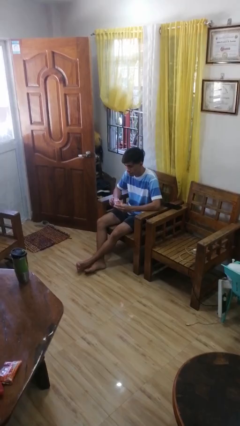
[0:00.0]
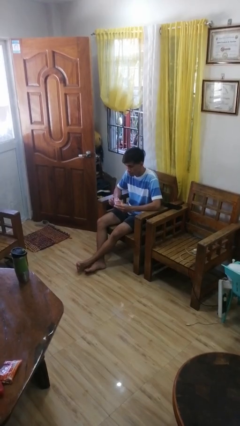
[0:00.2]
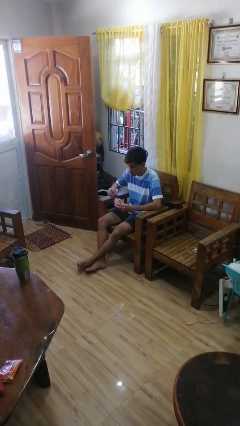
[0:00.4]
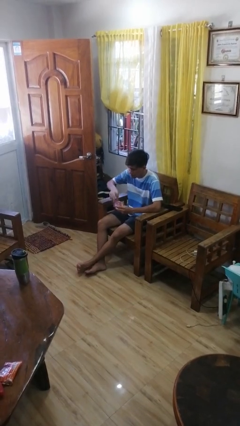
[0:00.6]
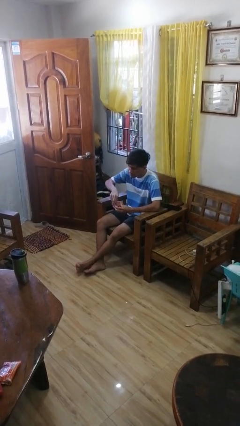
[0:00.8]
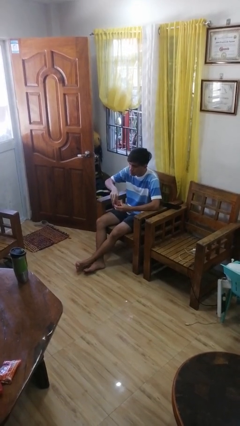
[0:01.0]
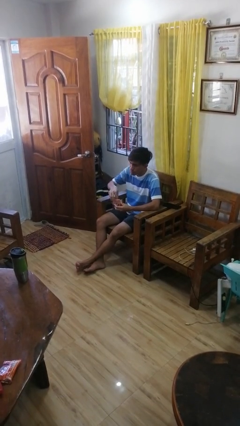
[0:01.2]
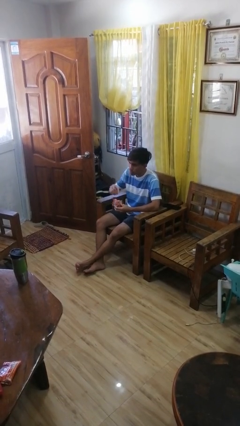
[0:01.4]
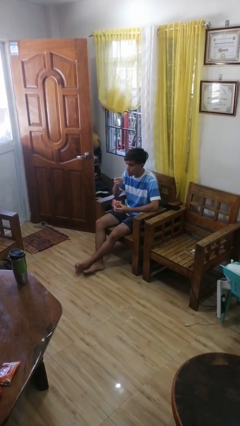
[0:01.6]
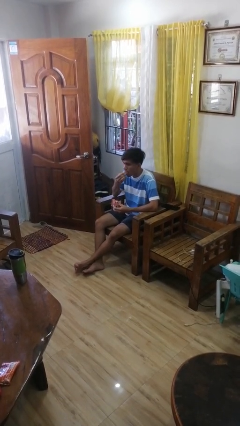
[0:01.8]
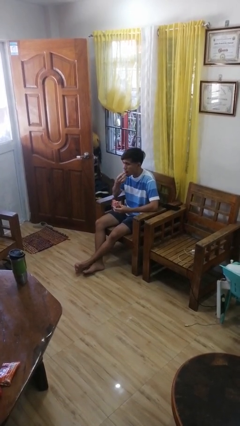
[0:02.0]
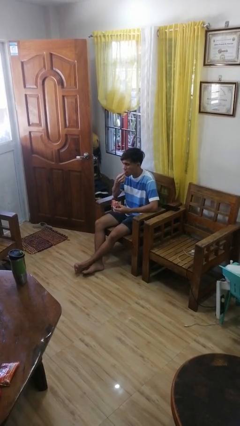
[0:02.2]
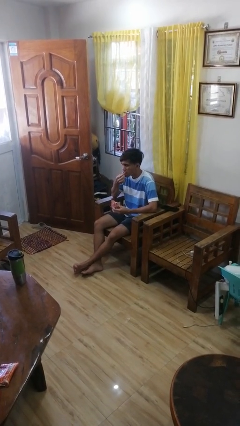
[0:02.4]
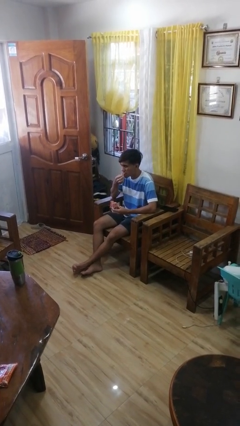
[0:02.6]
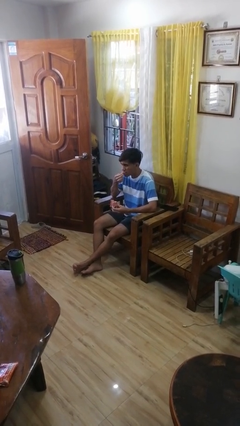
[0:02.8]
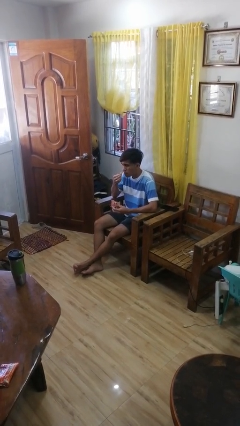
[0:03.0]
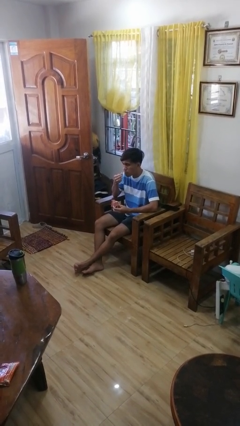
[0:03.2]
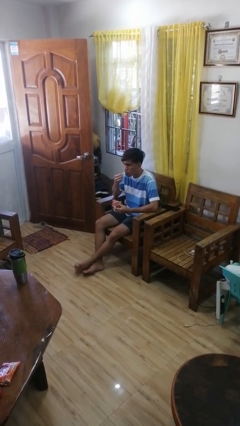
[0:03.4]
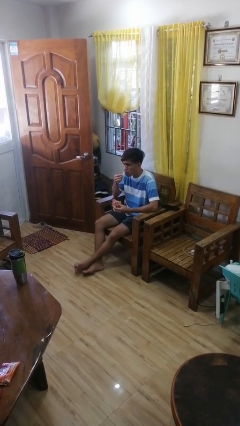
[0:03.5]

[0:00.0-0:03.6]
person eats snack from bag

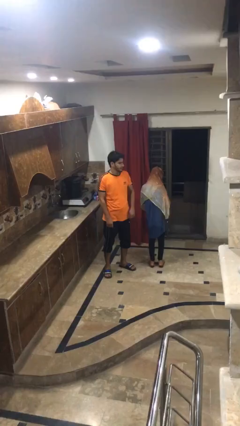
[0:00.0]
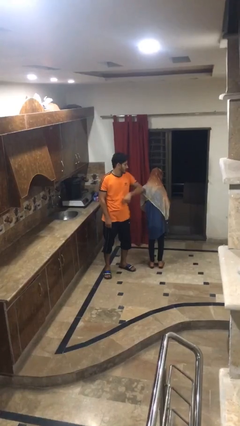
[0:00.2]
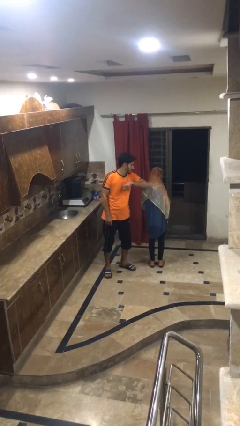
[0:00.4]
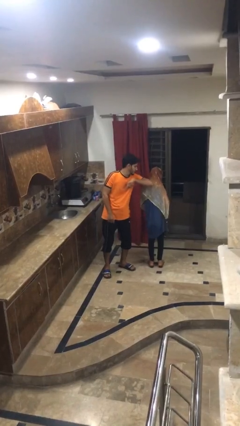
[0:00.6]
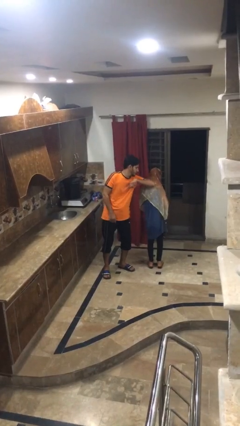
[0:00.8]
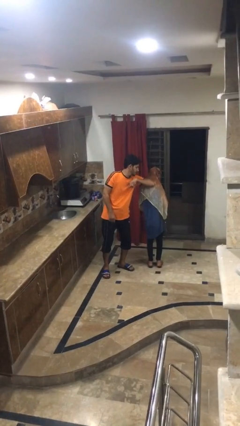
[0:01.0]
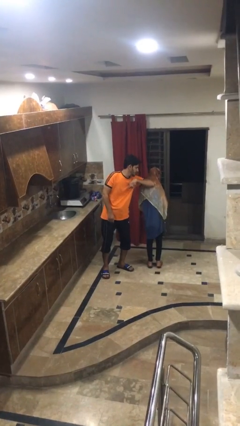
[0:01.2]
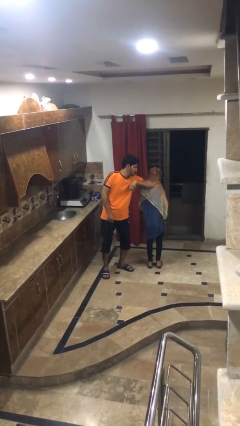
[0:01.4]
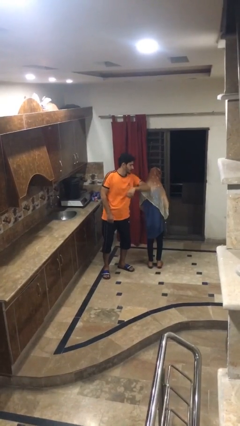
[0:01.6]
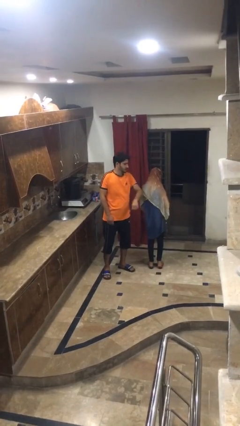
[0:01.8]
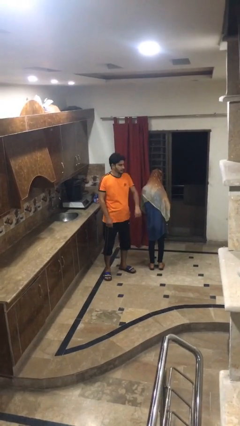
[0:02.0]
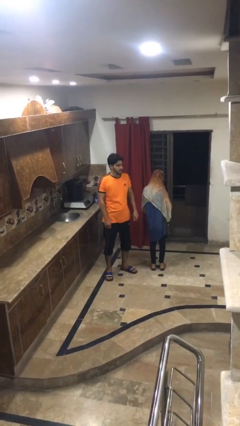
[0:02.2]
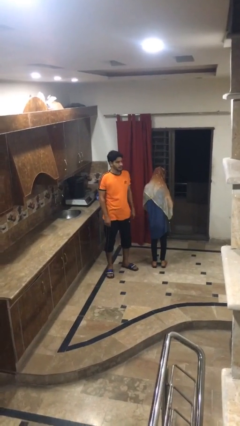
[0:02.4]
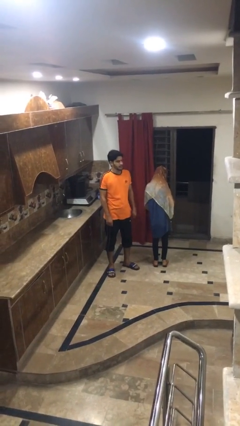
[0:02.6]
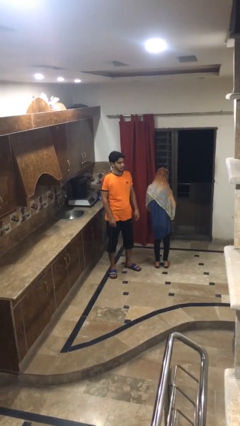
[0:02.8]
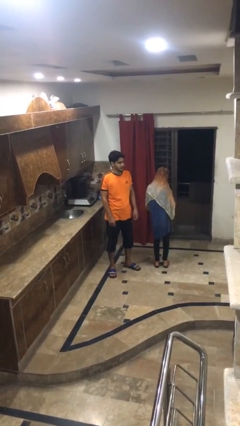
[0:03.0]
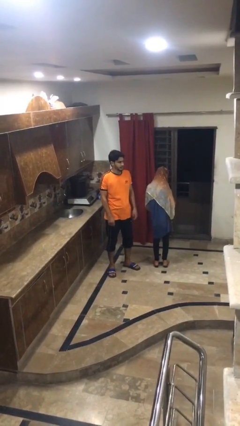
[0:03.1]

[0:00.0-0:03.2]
person nudges person with elbow

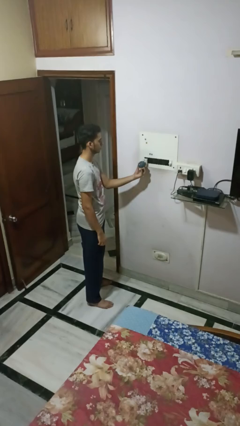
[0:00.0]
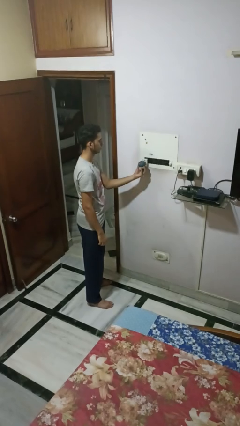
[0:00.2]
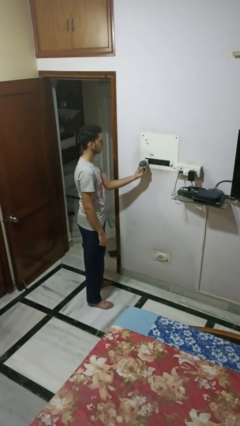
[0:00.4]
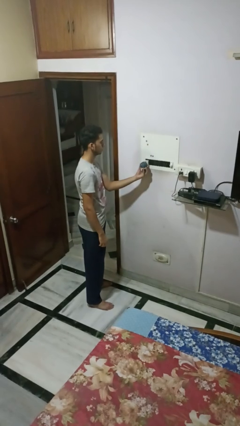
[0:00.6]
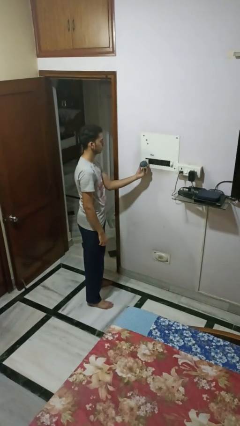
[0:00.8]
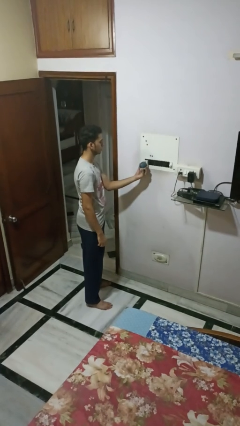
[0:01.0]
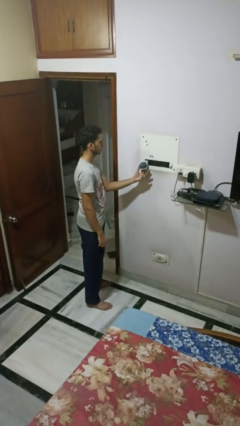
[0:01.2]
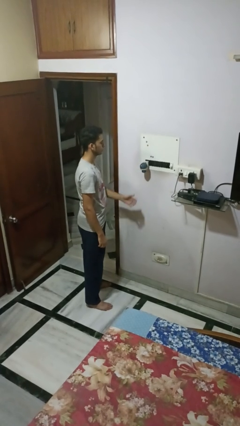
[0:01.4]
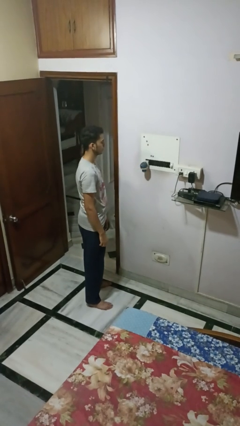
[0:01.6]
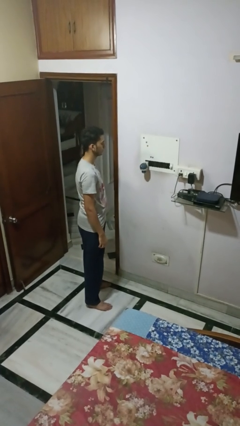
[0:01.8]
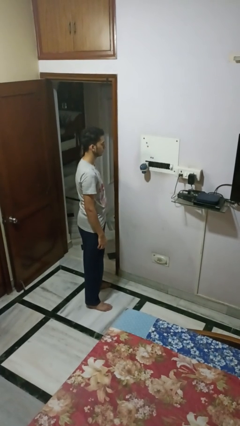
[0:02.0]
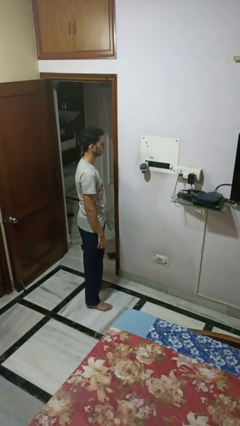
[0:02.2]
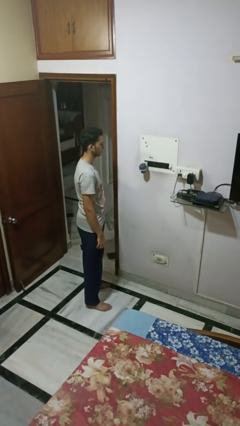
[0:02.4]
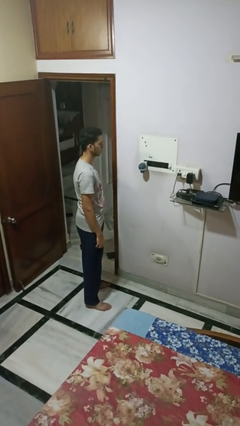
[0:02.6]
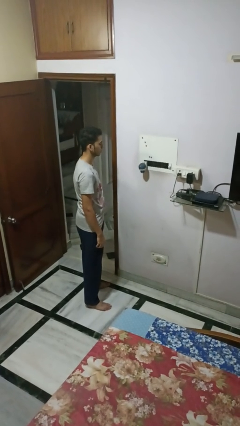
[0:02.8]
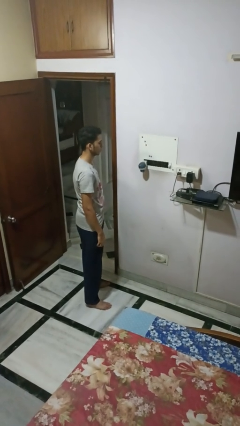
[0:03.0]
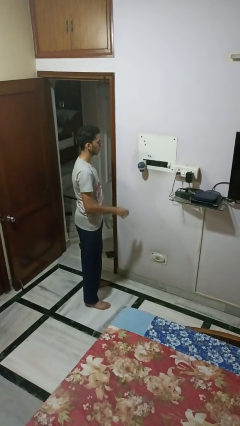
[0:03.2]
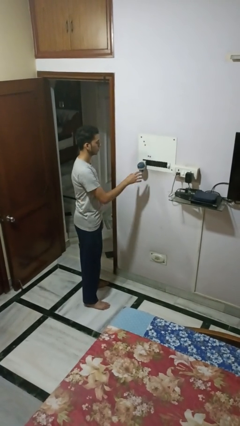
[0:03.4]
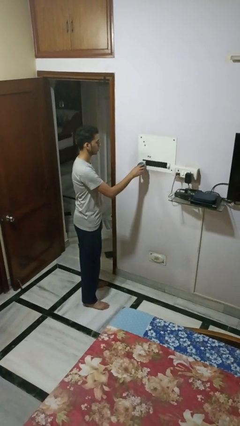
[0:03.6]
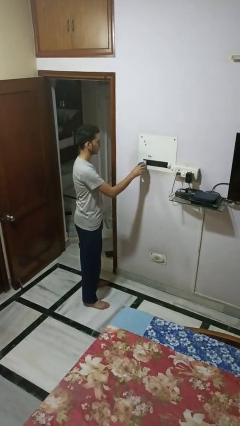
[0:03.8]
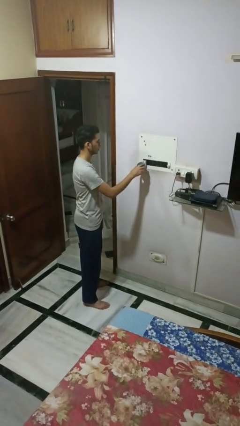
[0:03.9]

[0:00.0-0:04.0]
person plugs into electrical socket

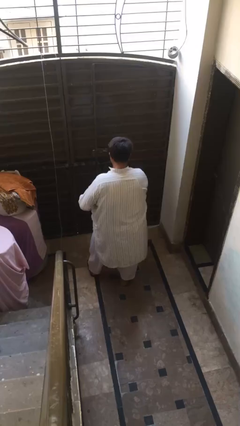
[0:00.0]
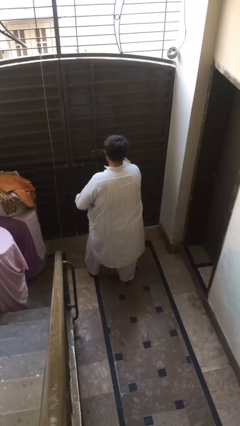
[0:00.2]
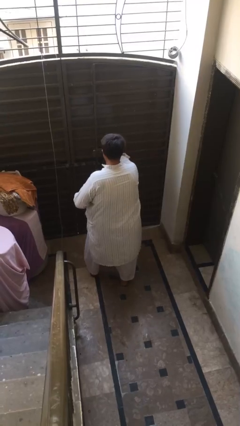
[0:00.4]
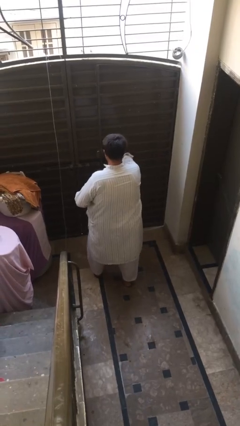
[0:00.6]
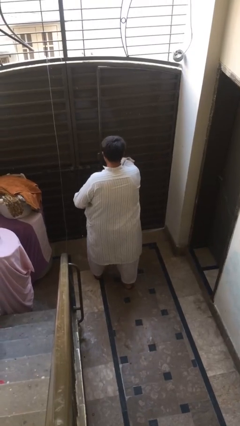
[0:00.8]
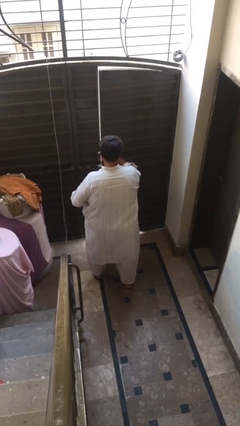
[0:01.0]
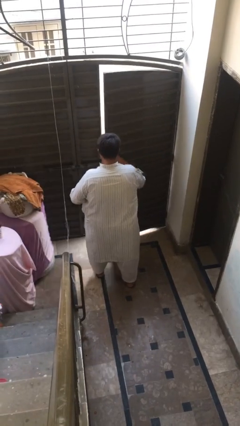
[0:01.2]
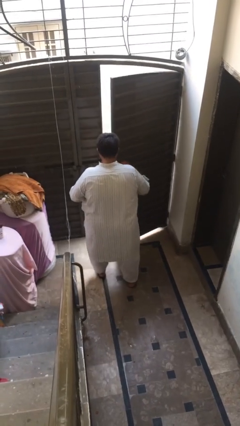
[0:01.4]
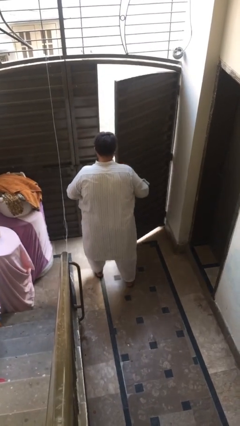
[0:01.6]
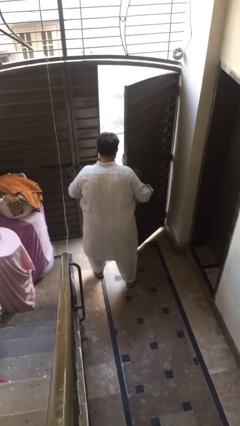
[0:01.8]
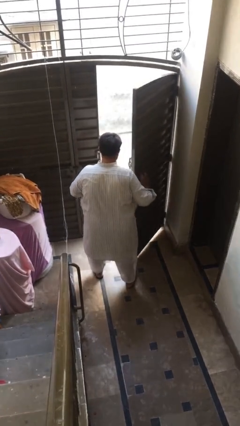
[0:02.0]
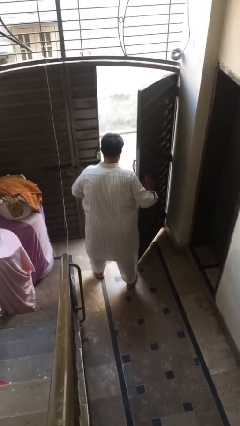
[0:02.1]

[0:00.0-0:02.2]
person opens facility door

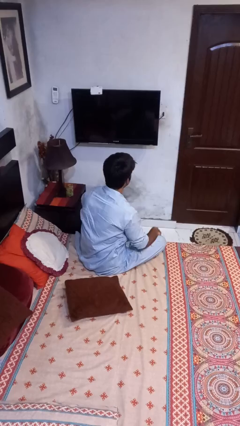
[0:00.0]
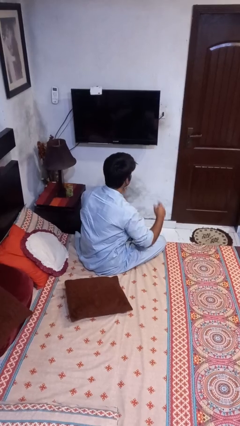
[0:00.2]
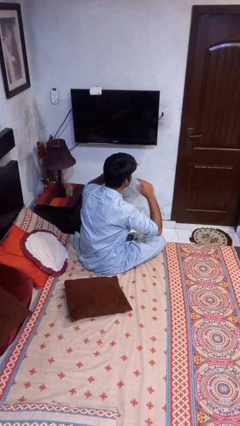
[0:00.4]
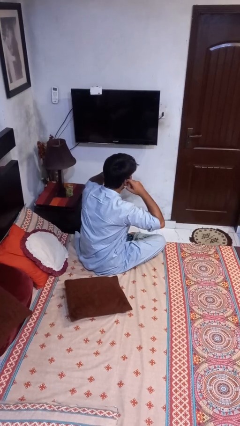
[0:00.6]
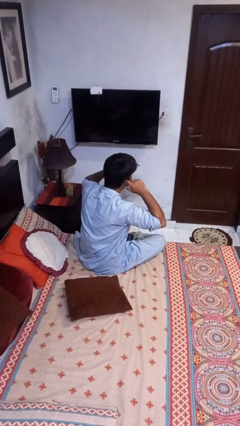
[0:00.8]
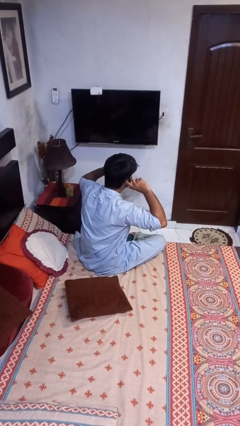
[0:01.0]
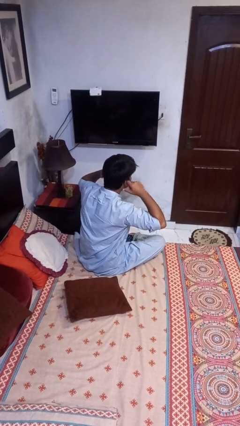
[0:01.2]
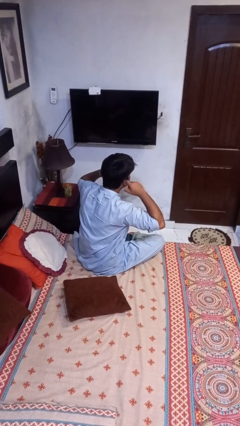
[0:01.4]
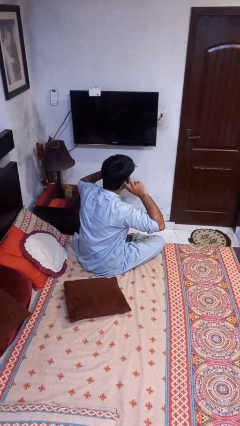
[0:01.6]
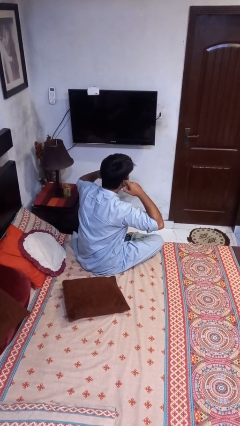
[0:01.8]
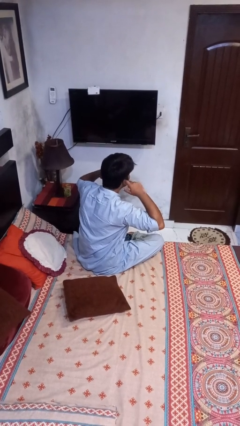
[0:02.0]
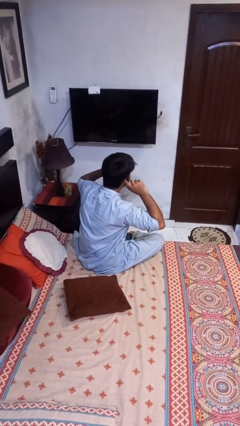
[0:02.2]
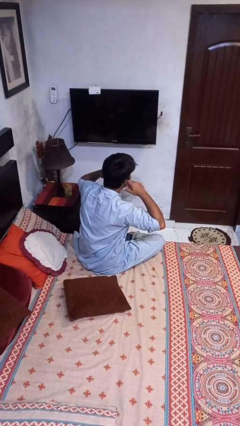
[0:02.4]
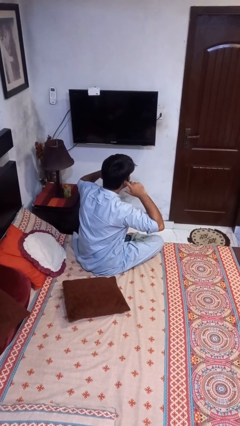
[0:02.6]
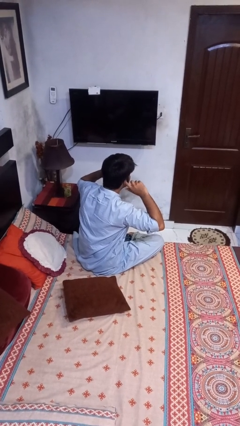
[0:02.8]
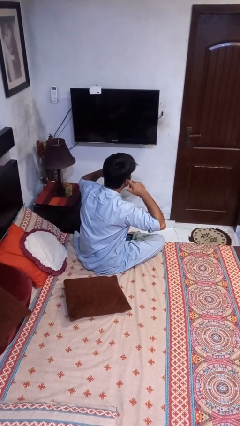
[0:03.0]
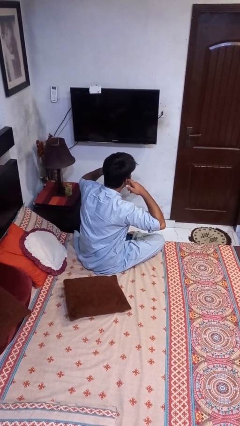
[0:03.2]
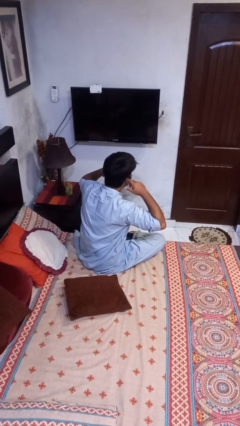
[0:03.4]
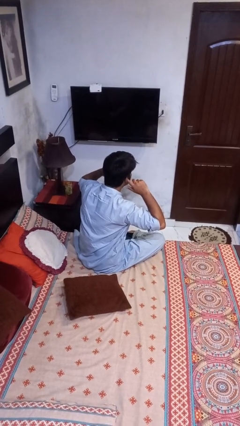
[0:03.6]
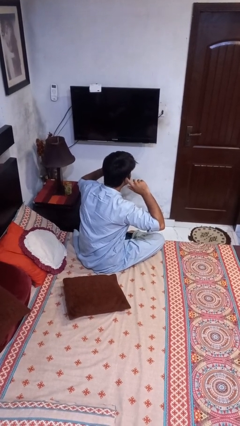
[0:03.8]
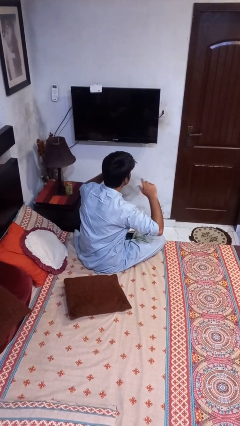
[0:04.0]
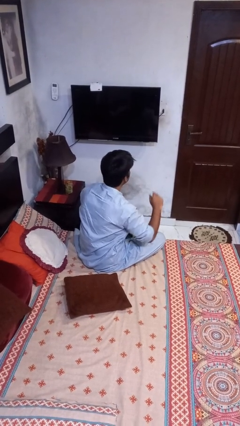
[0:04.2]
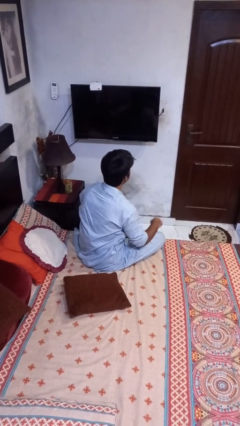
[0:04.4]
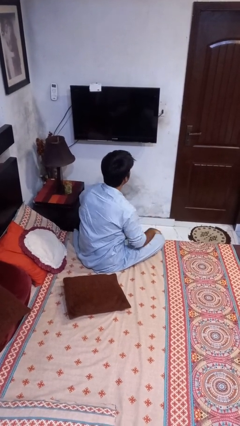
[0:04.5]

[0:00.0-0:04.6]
person puts fingers in ear
